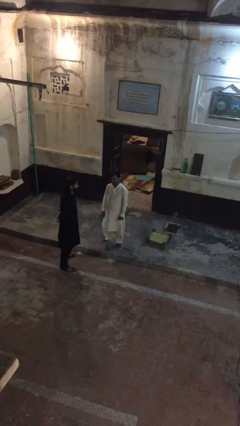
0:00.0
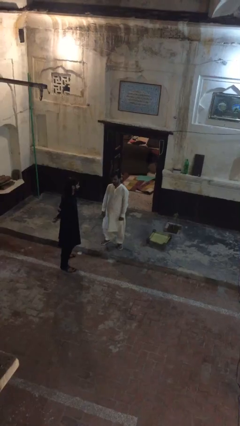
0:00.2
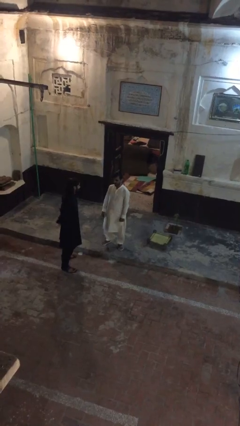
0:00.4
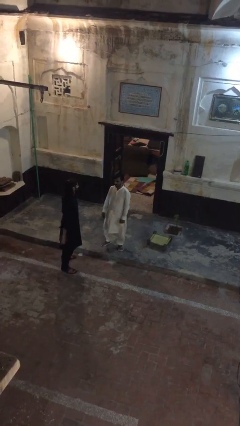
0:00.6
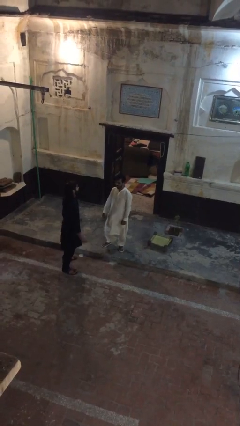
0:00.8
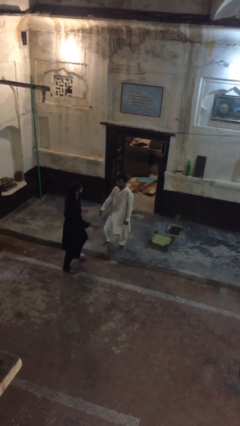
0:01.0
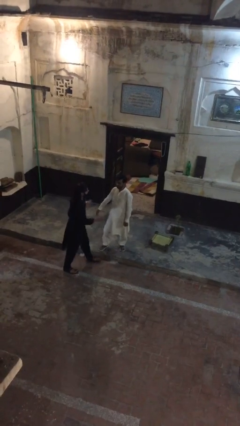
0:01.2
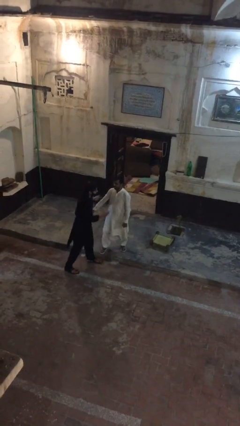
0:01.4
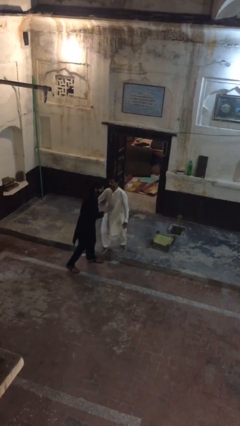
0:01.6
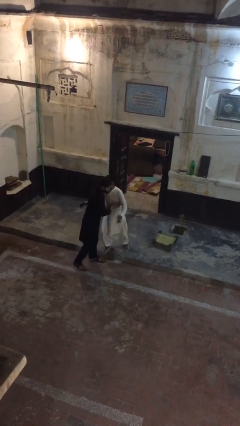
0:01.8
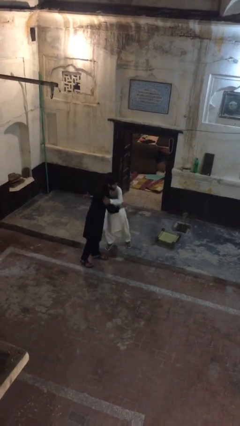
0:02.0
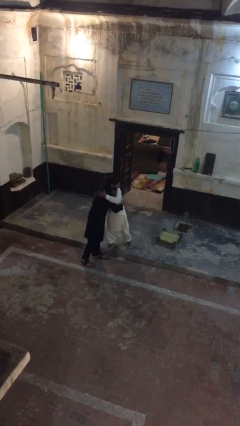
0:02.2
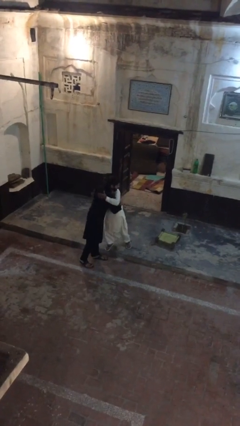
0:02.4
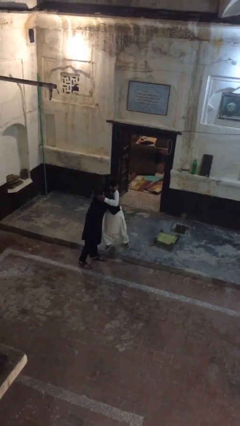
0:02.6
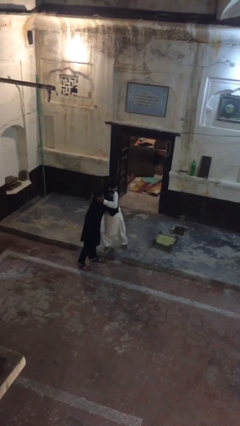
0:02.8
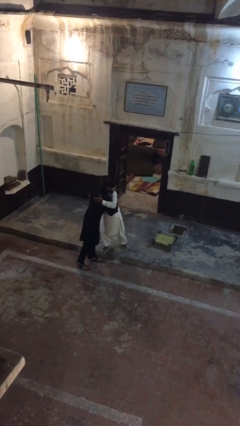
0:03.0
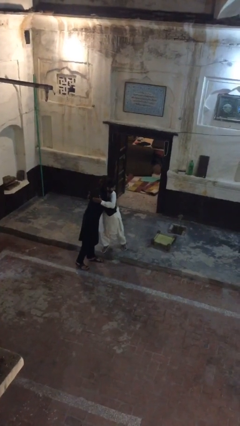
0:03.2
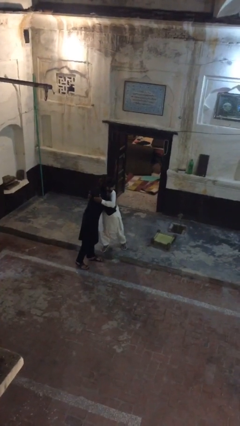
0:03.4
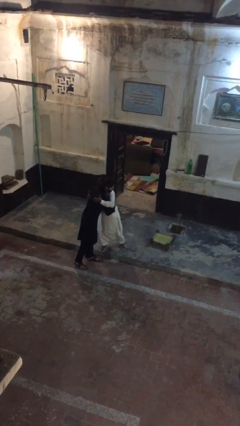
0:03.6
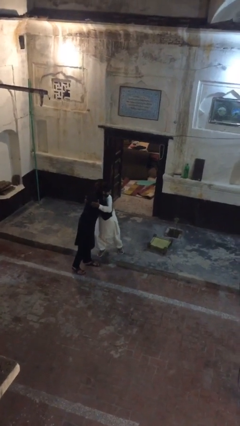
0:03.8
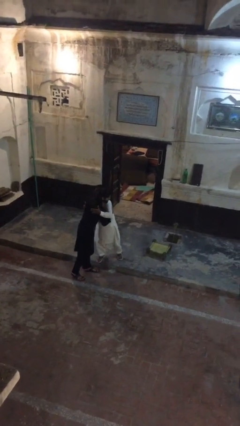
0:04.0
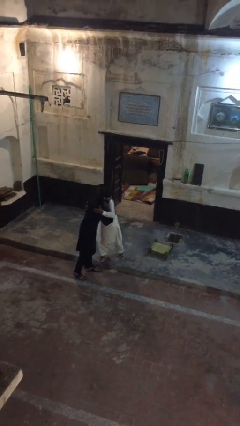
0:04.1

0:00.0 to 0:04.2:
person embraces person

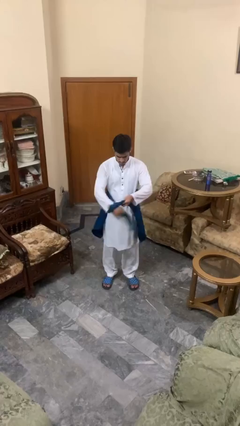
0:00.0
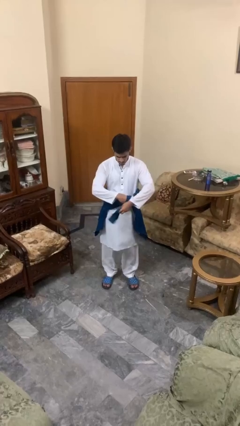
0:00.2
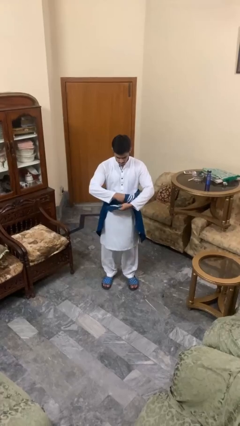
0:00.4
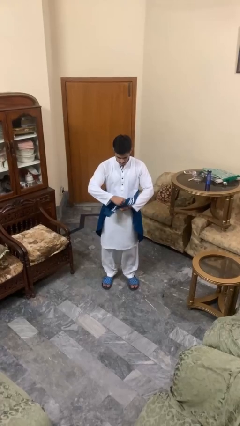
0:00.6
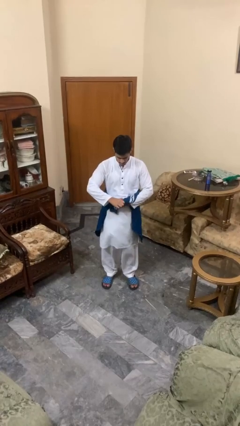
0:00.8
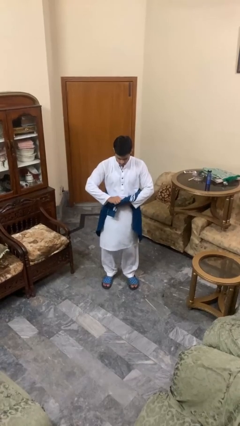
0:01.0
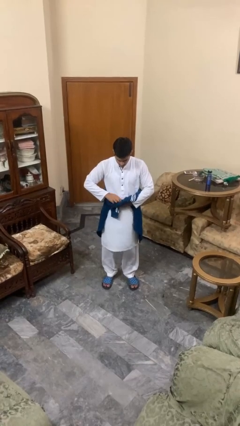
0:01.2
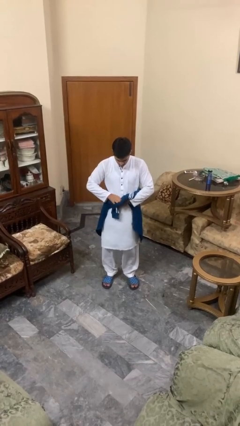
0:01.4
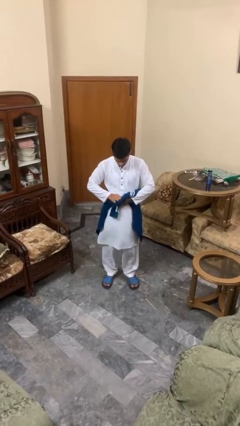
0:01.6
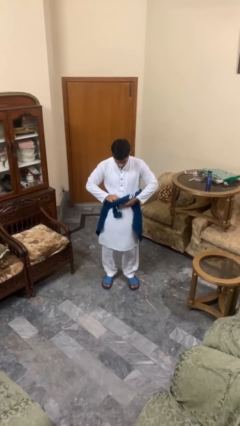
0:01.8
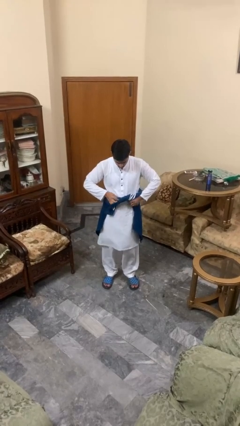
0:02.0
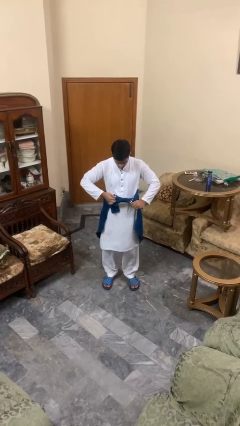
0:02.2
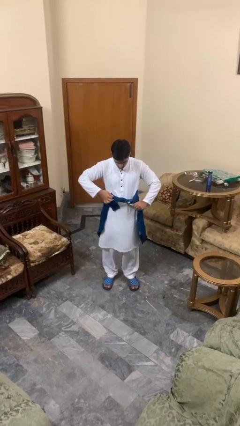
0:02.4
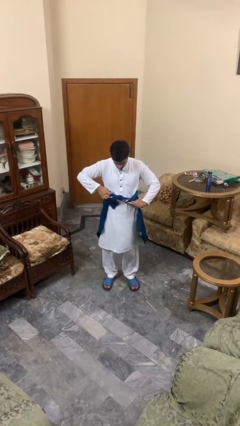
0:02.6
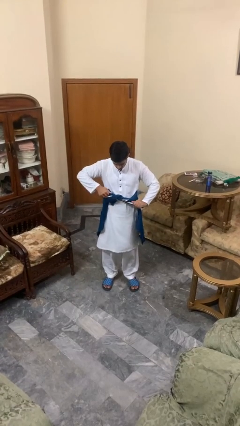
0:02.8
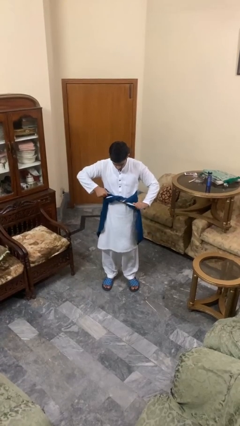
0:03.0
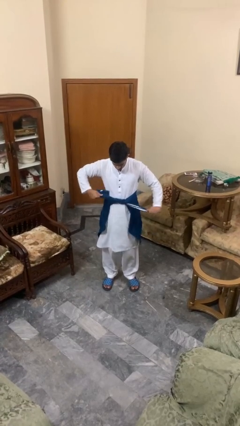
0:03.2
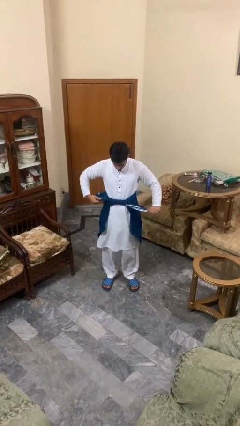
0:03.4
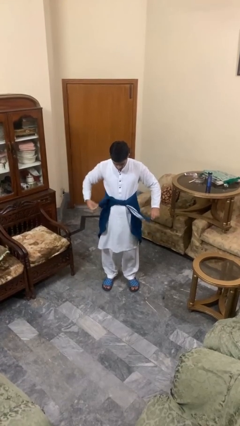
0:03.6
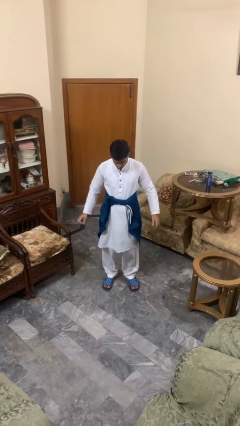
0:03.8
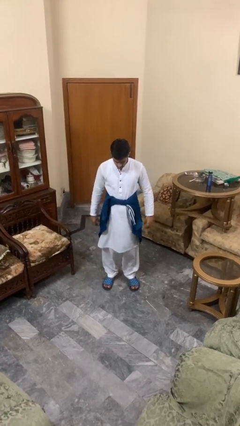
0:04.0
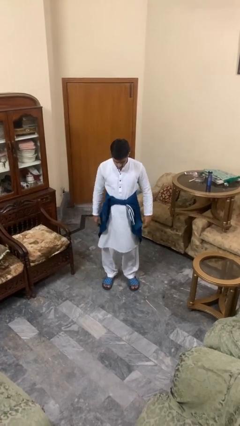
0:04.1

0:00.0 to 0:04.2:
person ties jacket around waist

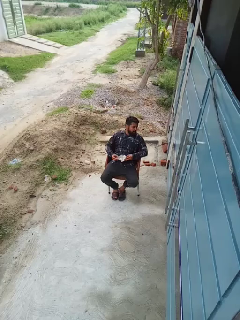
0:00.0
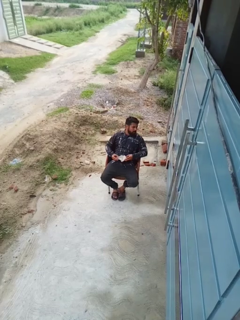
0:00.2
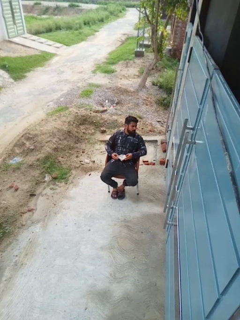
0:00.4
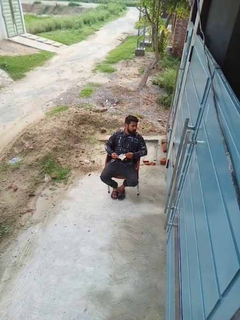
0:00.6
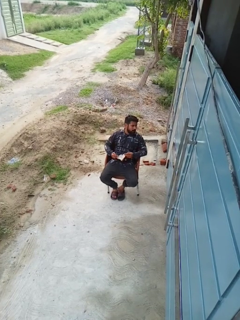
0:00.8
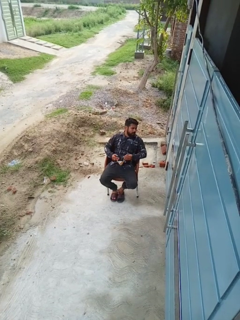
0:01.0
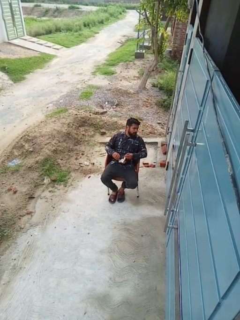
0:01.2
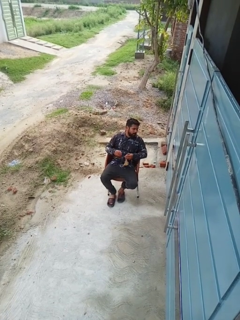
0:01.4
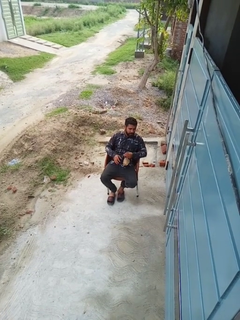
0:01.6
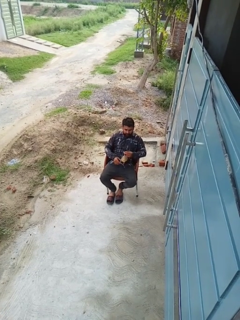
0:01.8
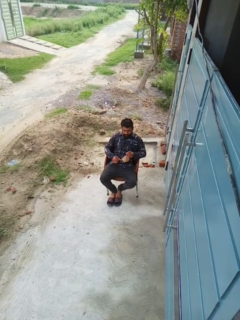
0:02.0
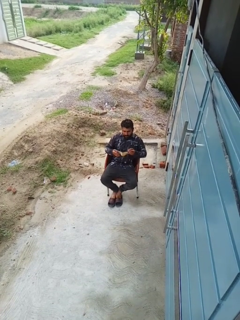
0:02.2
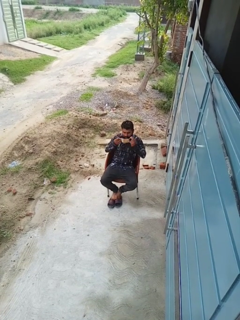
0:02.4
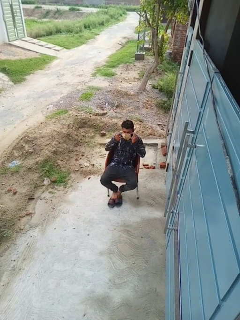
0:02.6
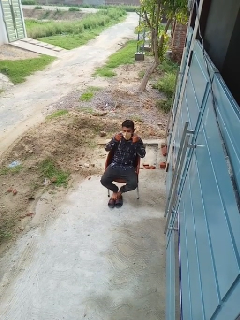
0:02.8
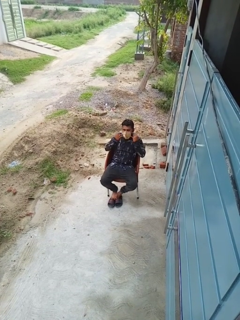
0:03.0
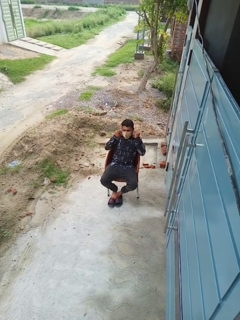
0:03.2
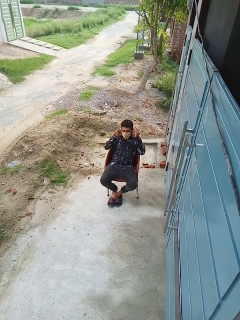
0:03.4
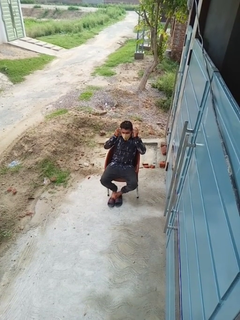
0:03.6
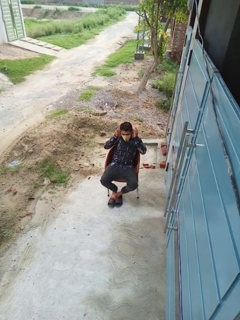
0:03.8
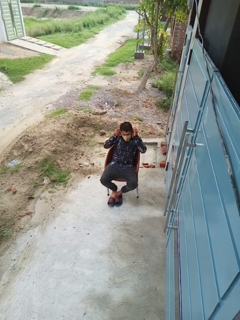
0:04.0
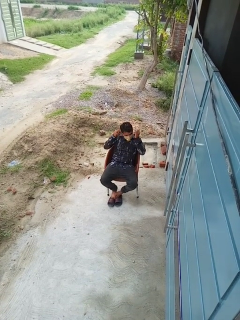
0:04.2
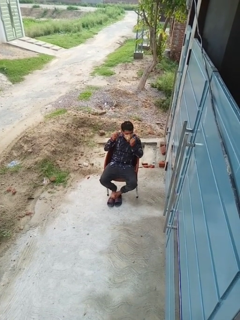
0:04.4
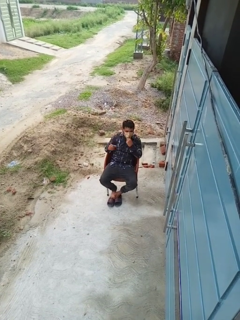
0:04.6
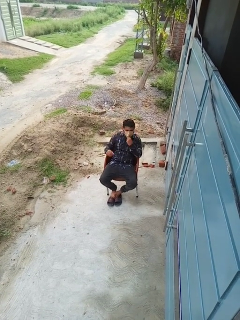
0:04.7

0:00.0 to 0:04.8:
person puts on facemask

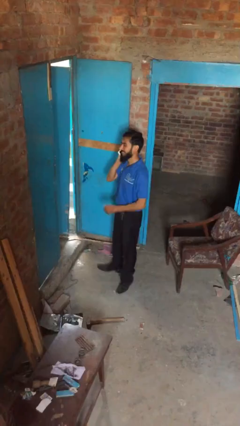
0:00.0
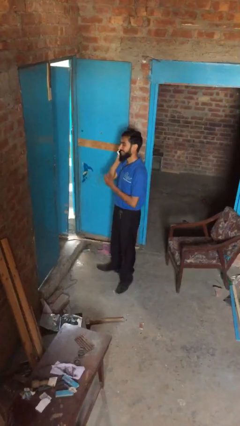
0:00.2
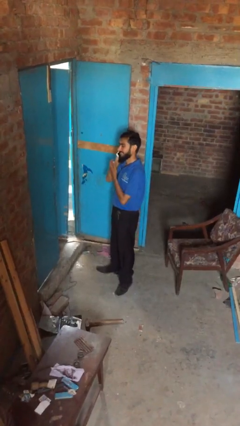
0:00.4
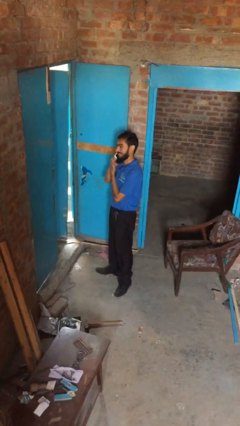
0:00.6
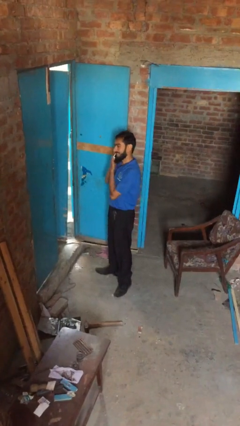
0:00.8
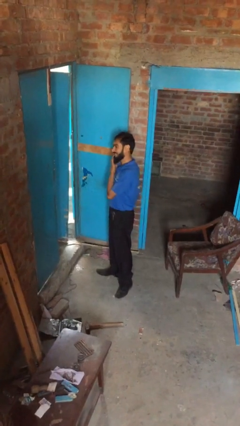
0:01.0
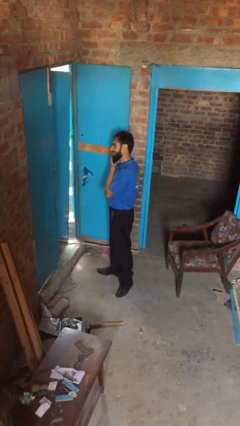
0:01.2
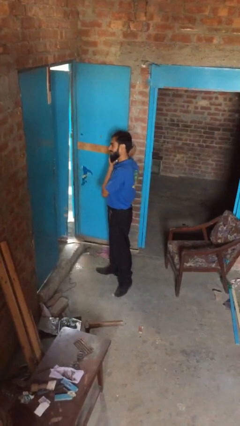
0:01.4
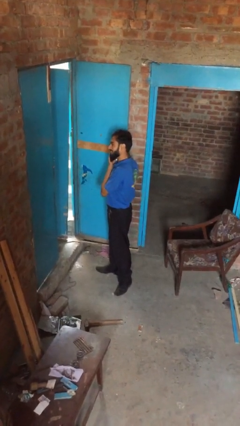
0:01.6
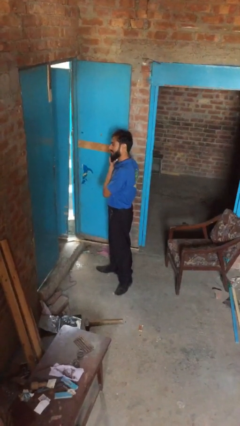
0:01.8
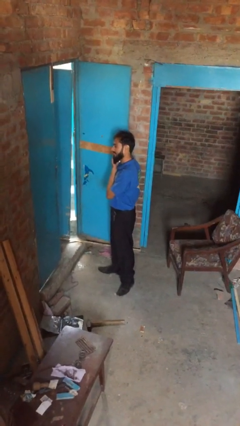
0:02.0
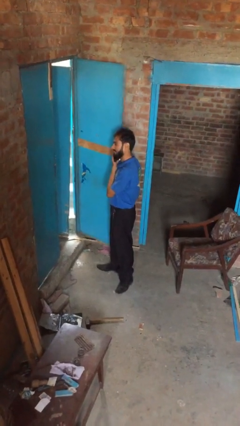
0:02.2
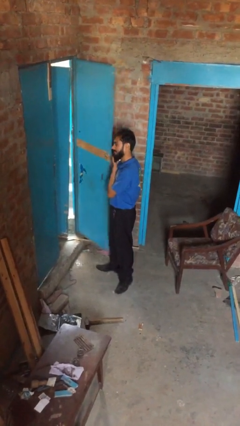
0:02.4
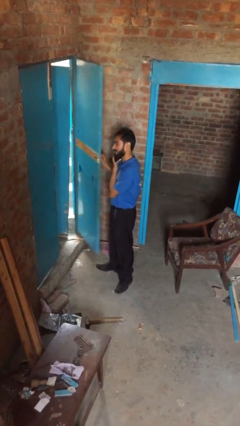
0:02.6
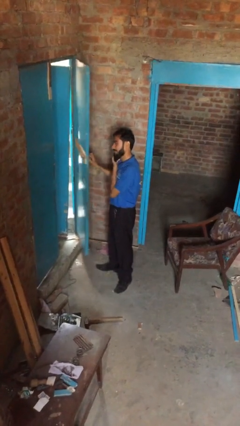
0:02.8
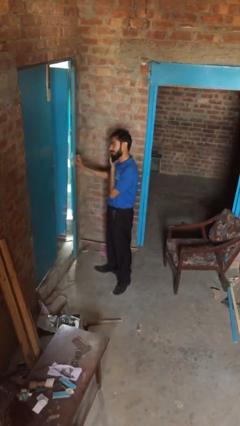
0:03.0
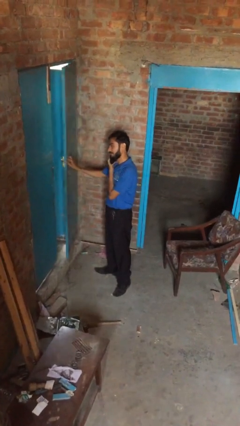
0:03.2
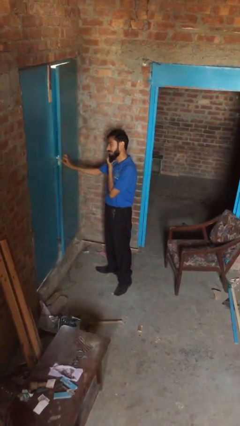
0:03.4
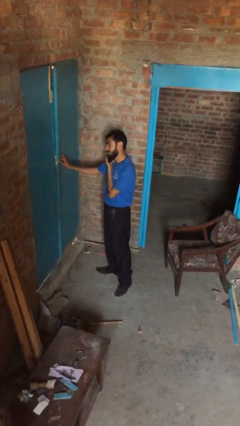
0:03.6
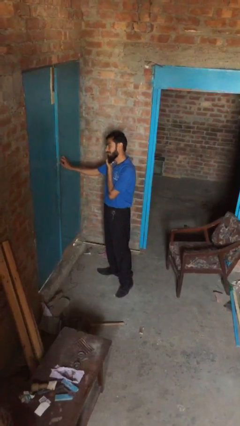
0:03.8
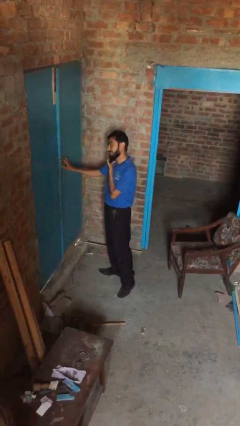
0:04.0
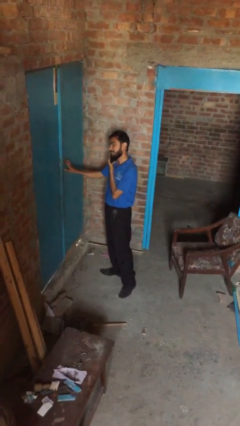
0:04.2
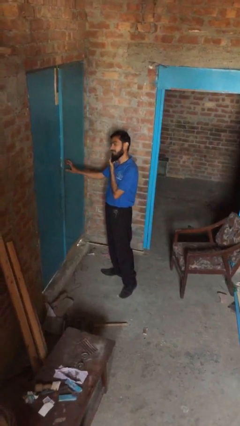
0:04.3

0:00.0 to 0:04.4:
person closes facility door

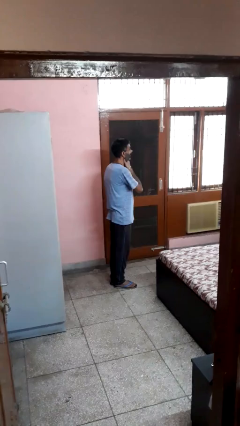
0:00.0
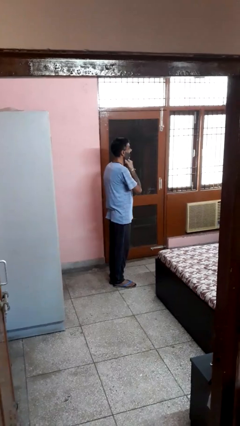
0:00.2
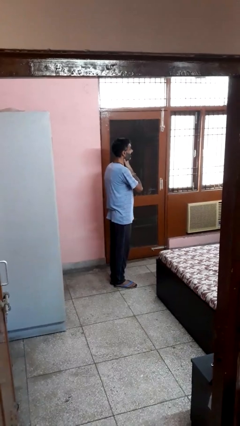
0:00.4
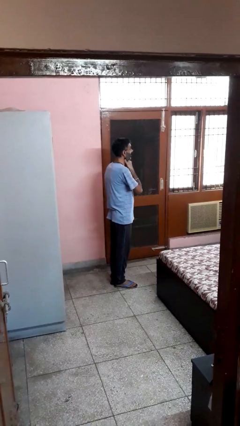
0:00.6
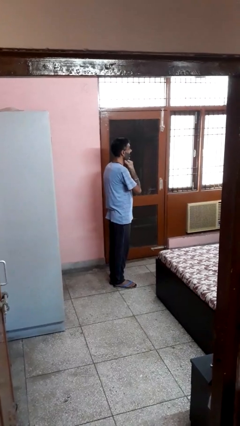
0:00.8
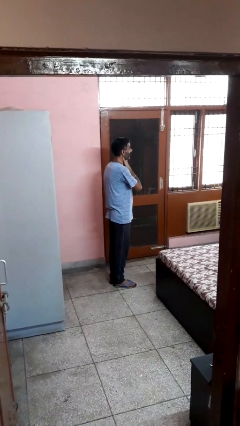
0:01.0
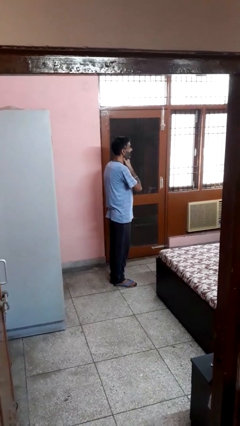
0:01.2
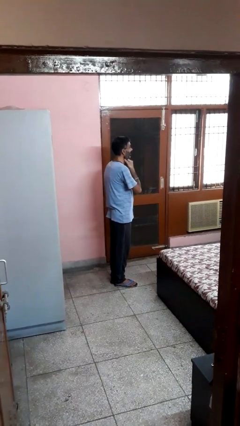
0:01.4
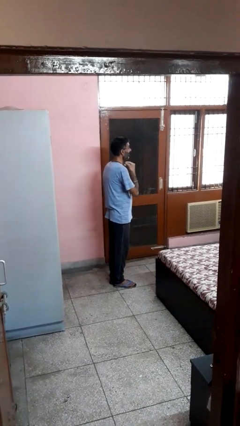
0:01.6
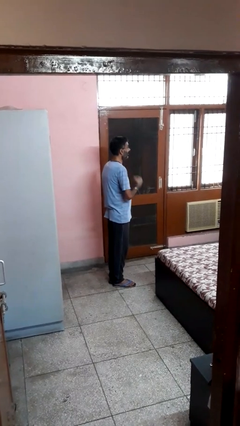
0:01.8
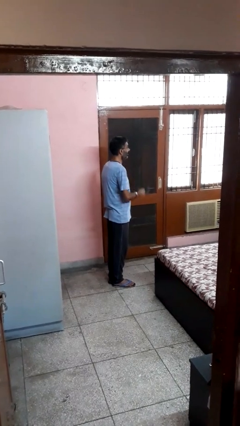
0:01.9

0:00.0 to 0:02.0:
person rubs neck
